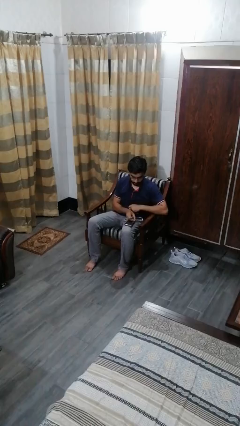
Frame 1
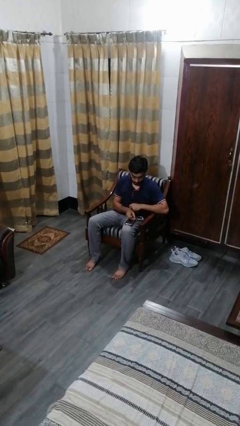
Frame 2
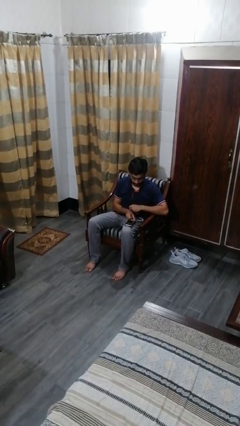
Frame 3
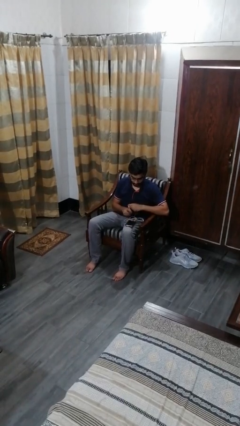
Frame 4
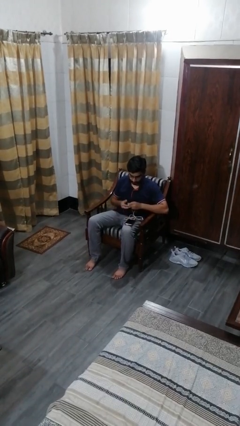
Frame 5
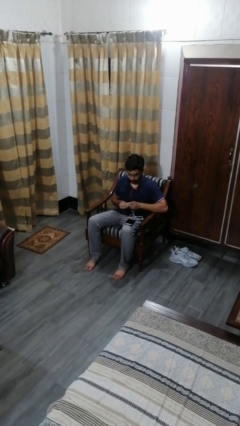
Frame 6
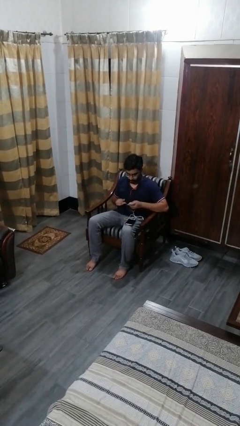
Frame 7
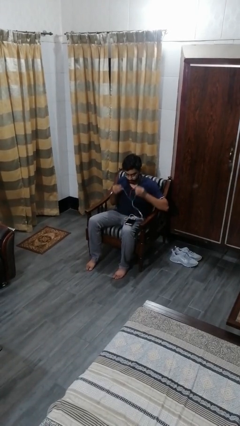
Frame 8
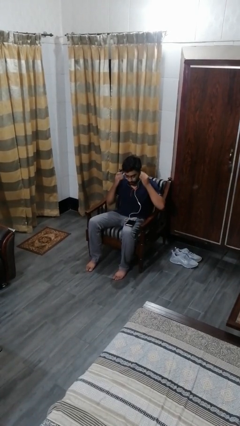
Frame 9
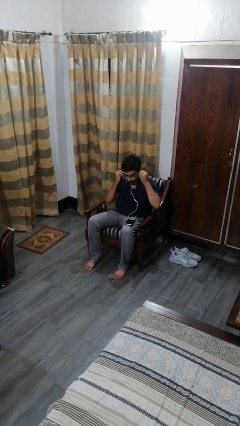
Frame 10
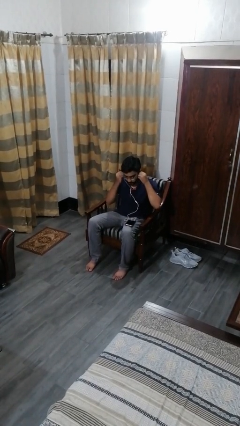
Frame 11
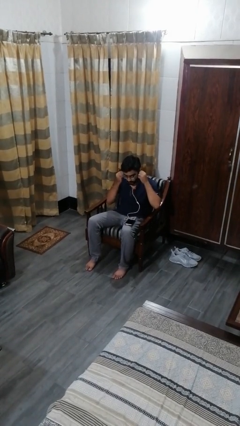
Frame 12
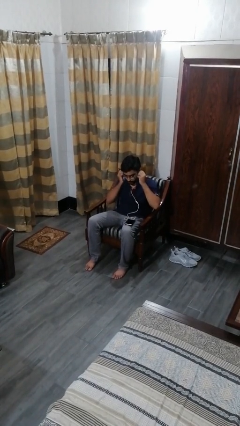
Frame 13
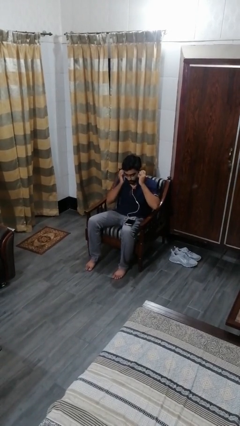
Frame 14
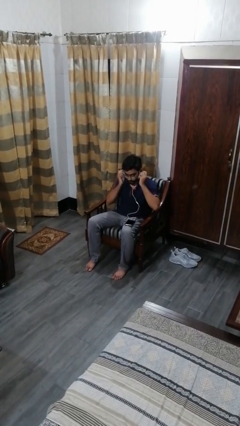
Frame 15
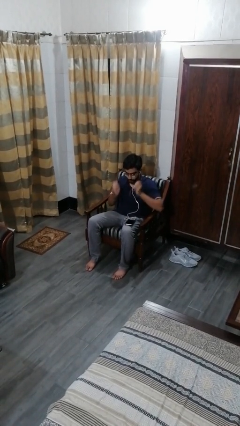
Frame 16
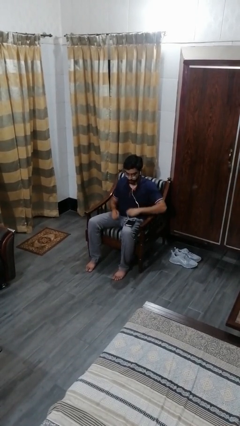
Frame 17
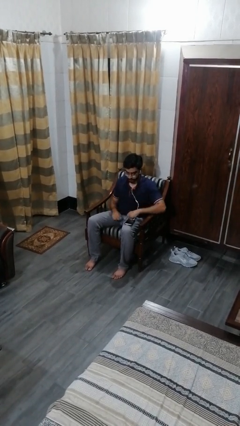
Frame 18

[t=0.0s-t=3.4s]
person puts on headphones

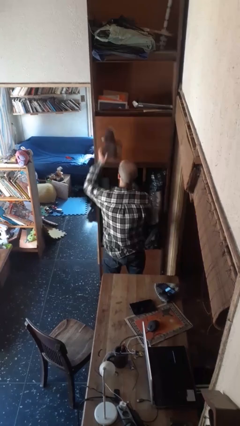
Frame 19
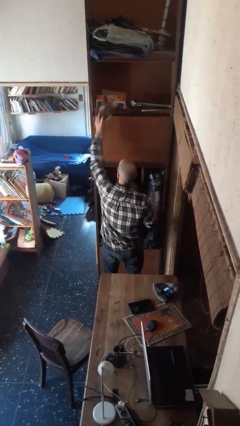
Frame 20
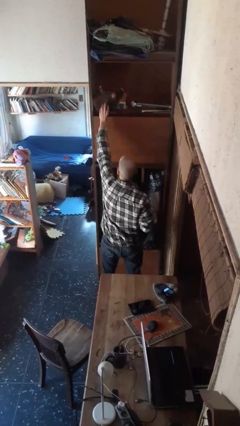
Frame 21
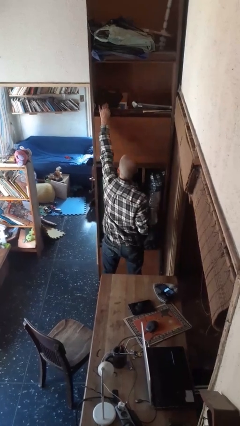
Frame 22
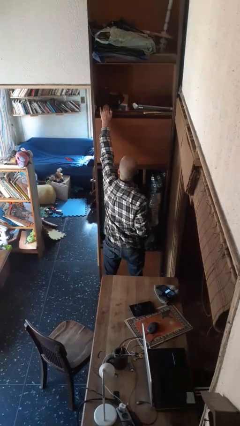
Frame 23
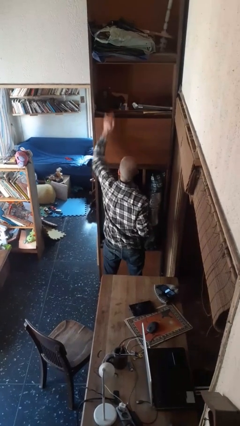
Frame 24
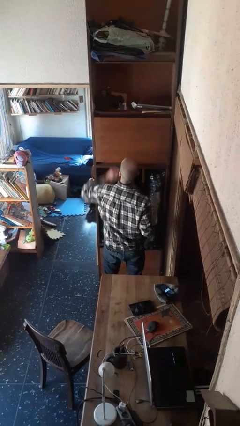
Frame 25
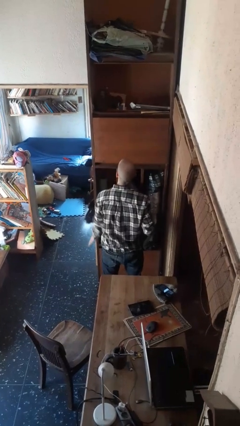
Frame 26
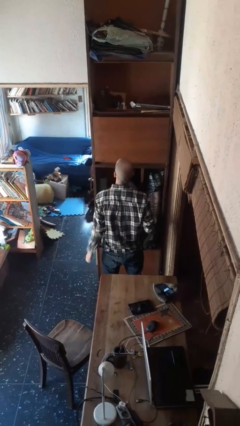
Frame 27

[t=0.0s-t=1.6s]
person puts down object on shelf

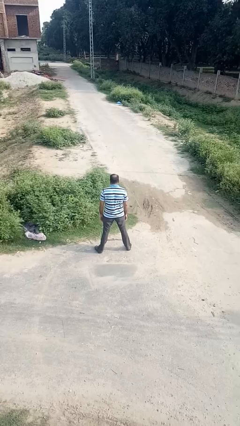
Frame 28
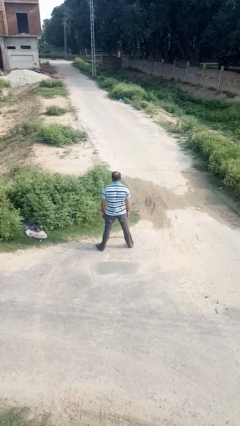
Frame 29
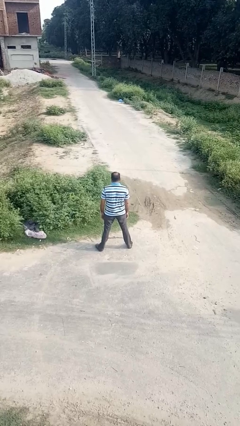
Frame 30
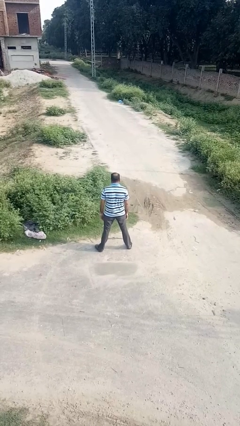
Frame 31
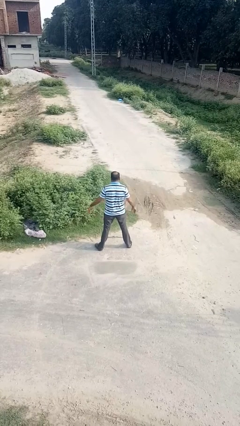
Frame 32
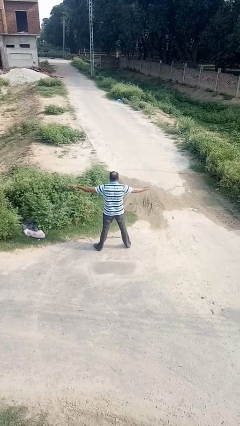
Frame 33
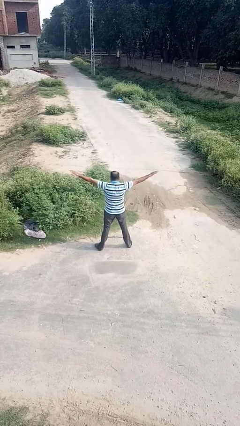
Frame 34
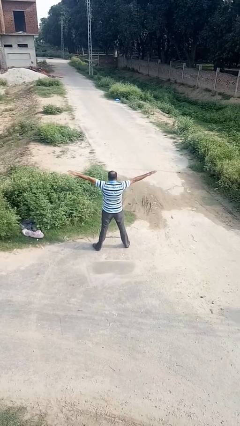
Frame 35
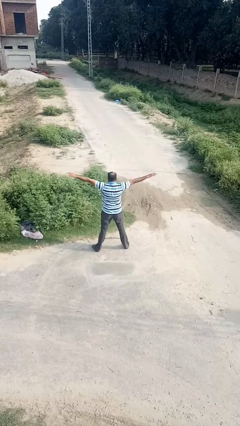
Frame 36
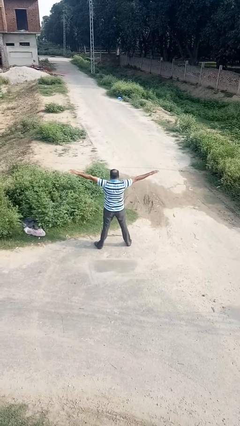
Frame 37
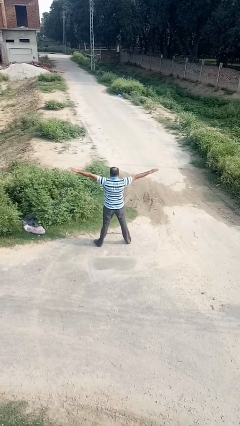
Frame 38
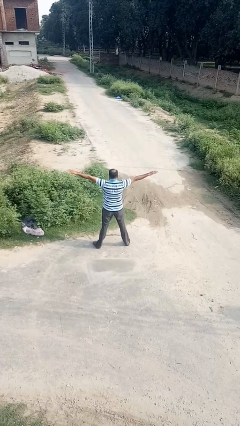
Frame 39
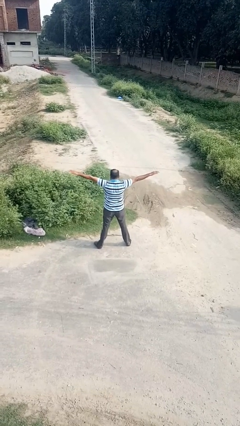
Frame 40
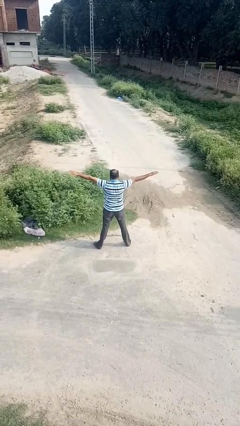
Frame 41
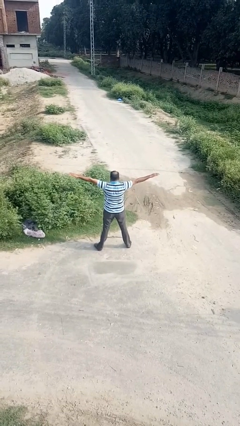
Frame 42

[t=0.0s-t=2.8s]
person stretches arms to side

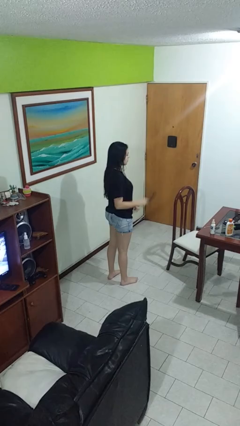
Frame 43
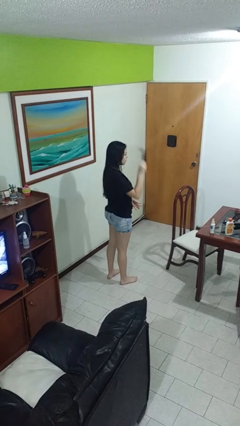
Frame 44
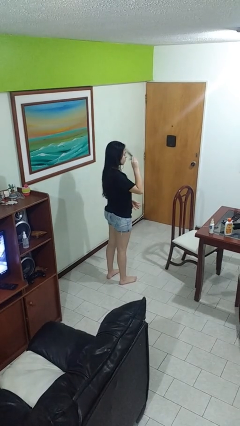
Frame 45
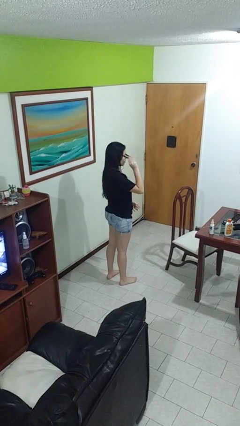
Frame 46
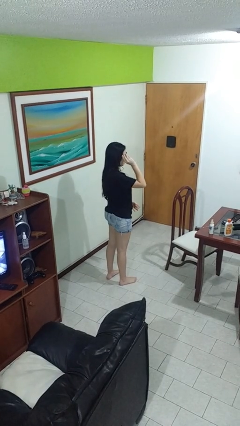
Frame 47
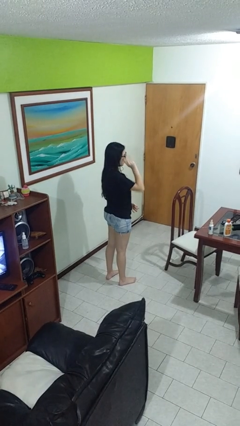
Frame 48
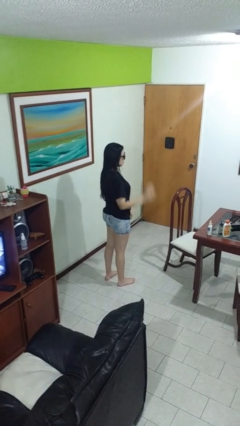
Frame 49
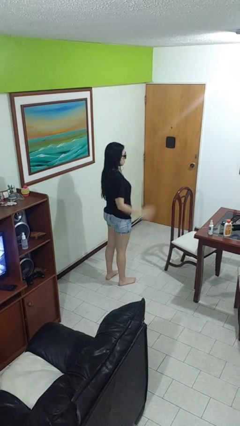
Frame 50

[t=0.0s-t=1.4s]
person puts on sunglasses

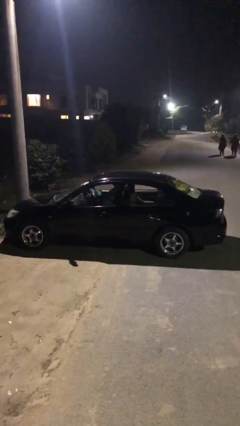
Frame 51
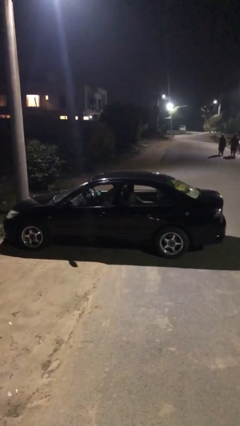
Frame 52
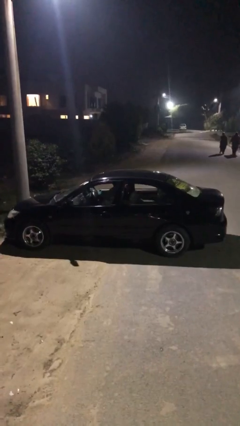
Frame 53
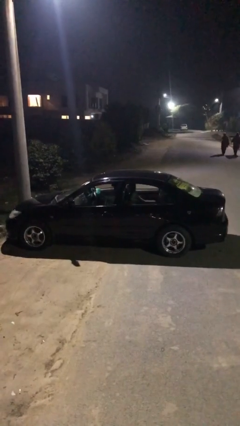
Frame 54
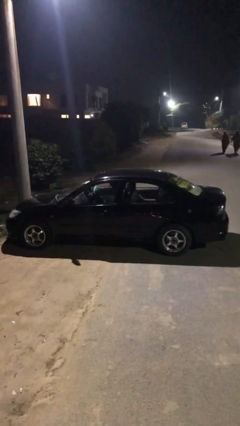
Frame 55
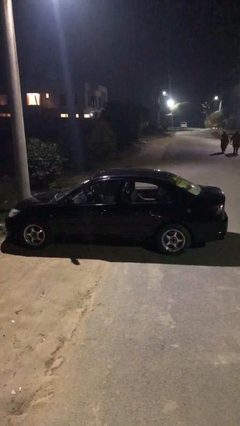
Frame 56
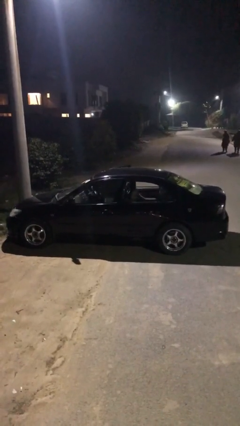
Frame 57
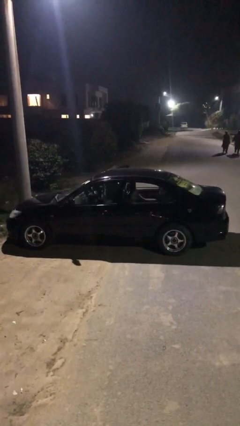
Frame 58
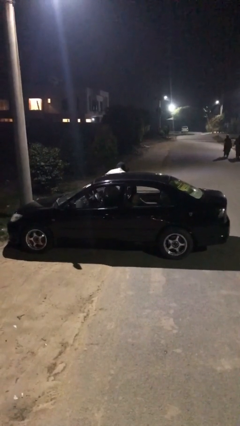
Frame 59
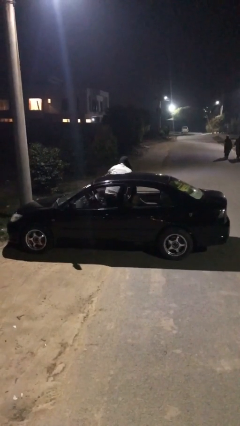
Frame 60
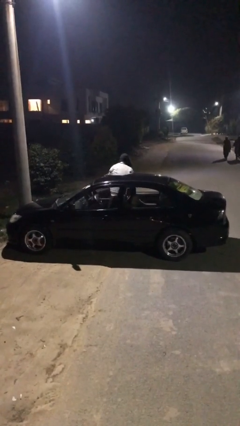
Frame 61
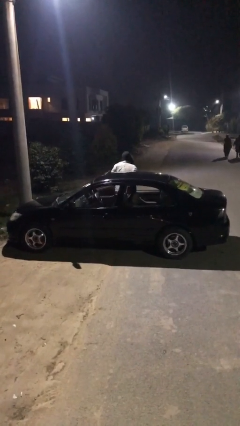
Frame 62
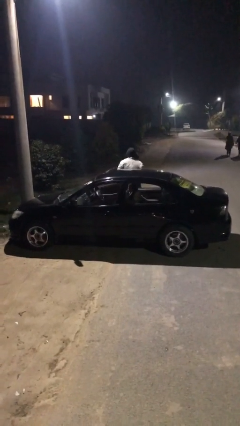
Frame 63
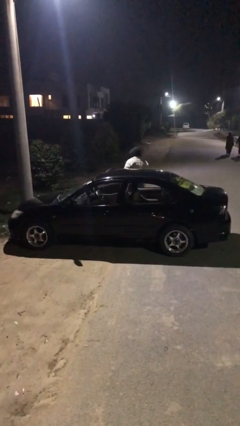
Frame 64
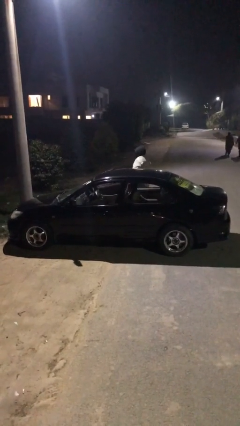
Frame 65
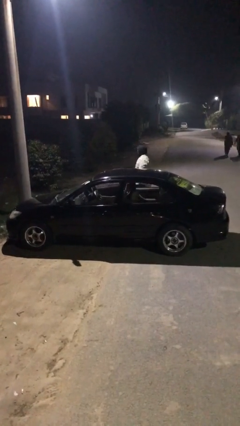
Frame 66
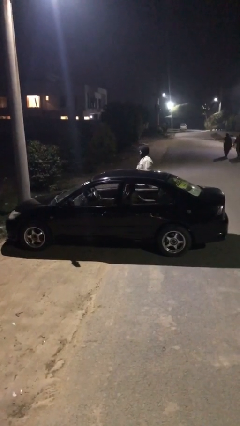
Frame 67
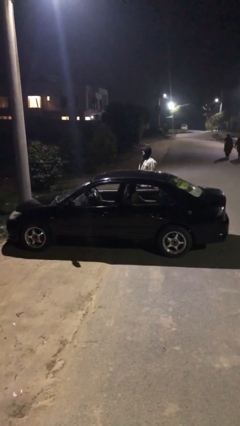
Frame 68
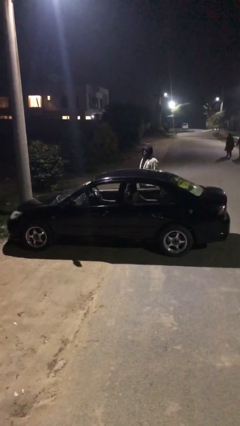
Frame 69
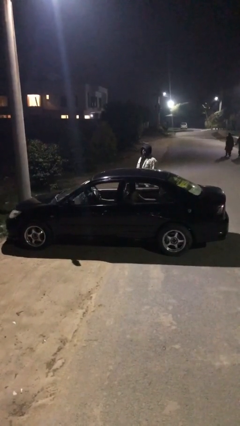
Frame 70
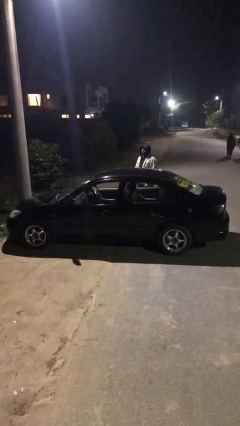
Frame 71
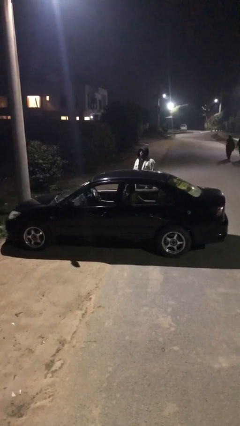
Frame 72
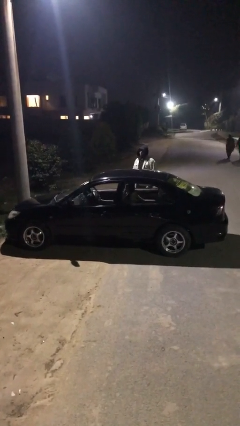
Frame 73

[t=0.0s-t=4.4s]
car drops off person

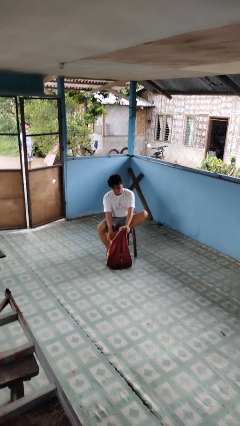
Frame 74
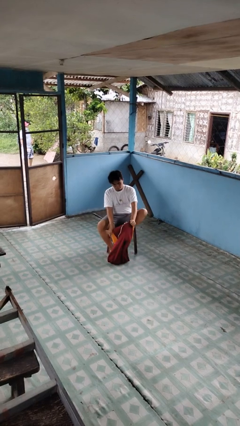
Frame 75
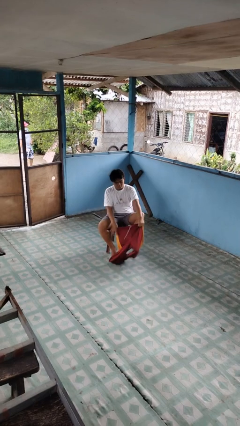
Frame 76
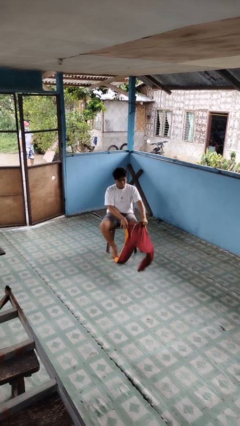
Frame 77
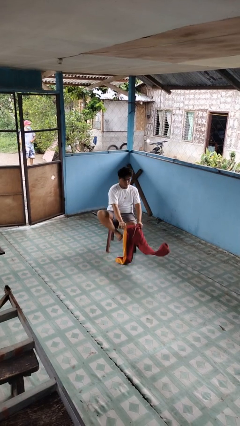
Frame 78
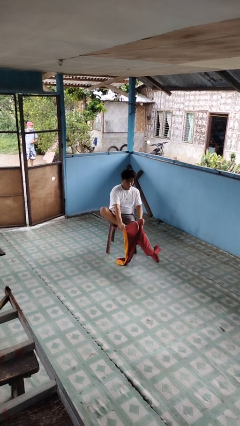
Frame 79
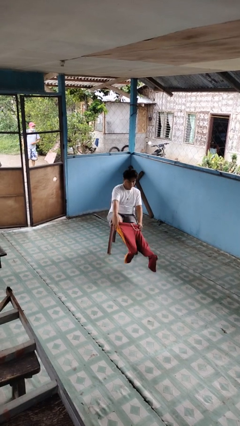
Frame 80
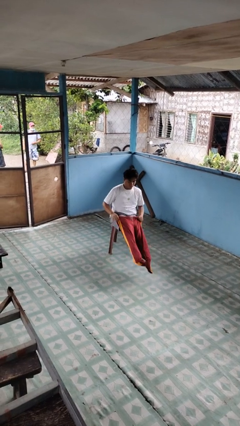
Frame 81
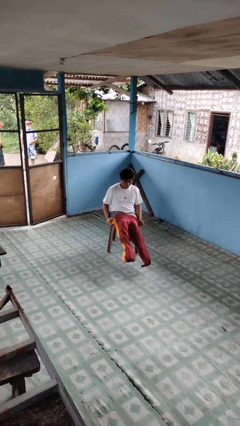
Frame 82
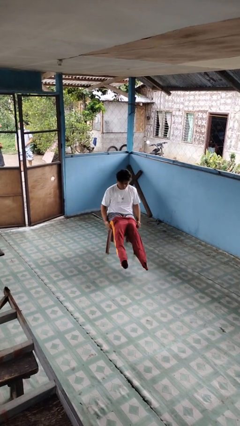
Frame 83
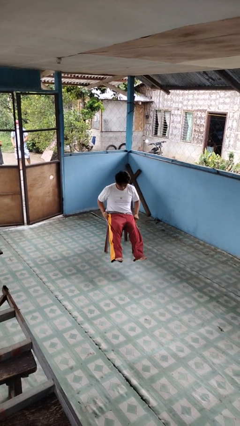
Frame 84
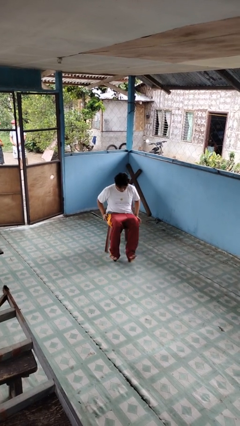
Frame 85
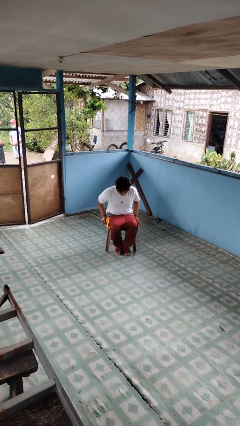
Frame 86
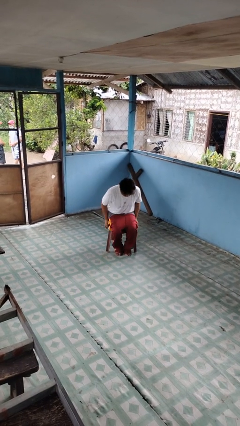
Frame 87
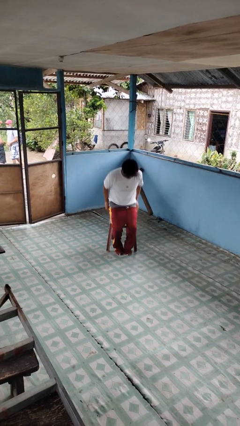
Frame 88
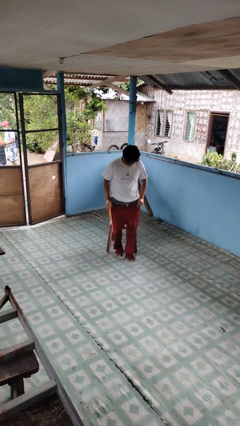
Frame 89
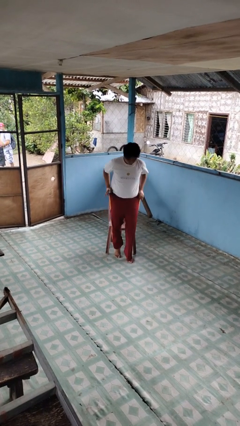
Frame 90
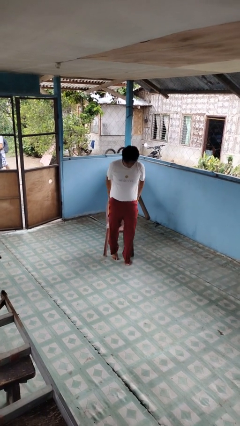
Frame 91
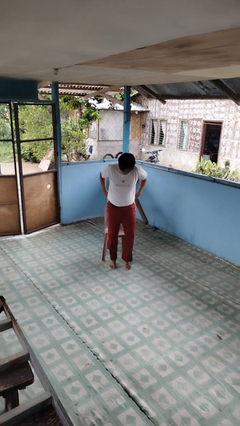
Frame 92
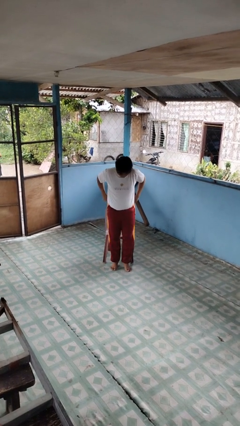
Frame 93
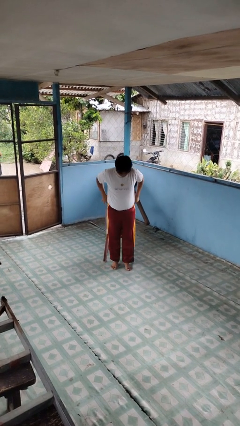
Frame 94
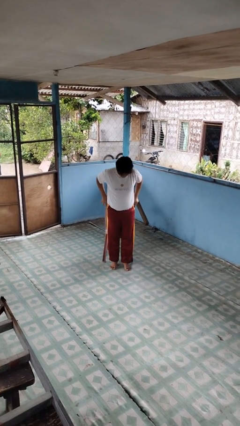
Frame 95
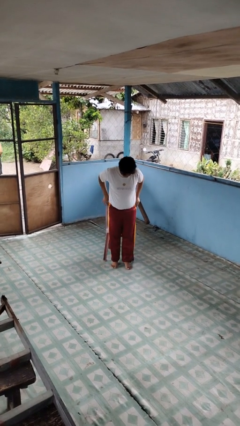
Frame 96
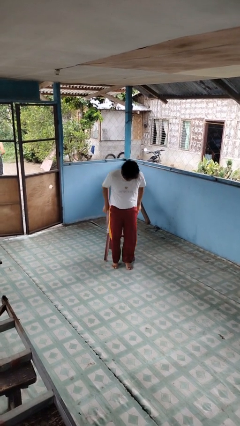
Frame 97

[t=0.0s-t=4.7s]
person puts on pants
